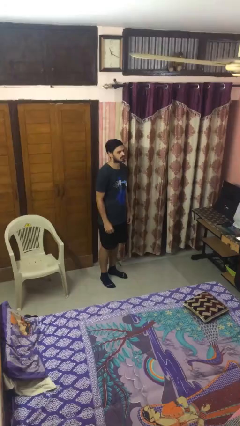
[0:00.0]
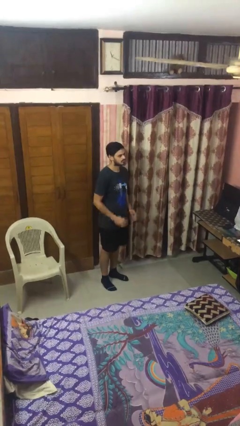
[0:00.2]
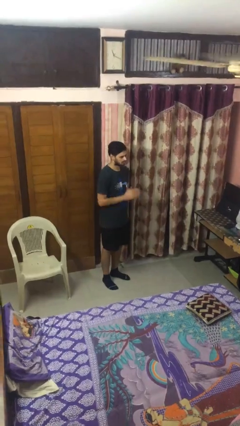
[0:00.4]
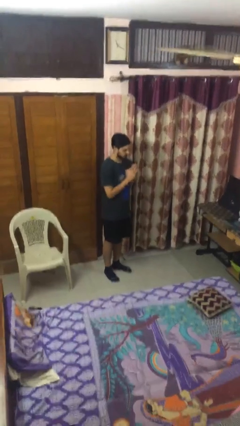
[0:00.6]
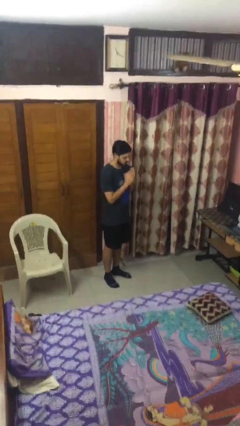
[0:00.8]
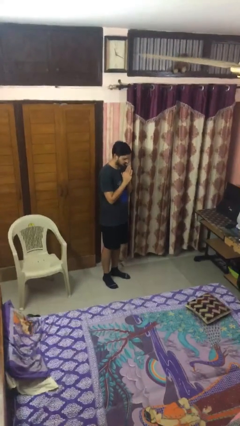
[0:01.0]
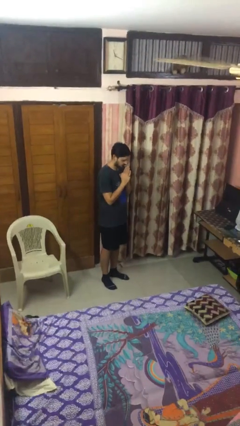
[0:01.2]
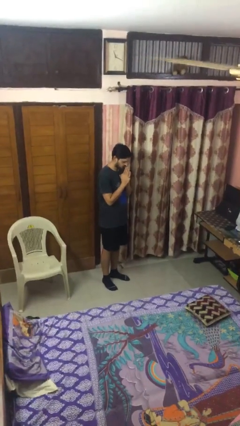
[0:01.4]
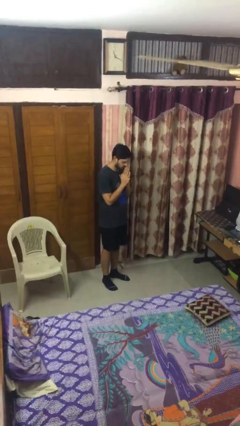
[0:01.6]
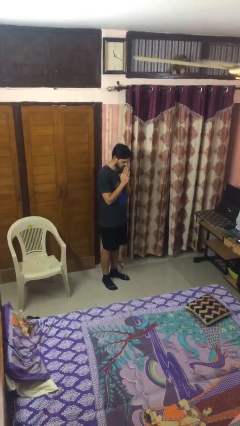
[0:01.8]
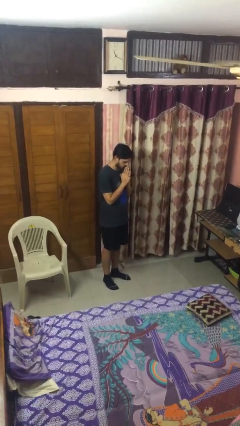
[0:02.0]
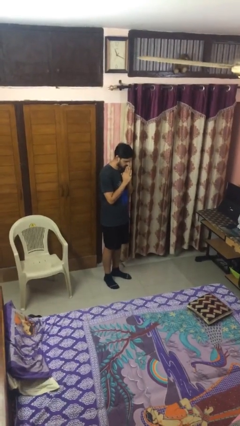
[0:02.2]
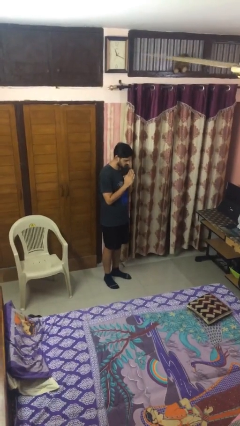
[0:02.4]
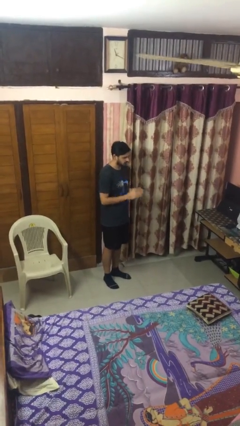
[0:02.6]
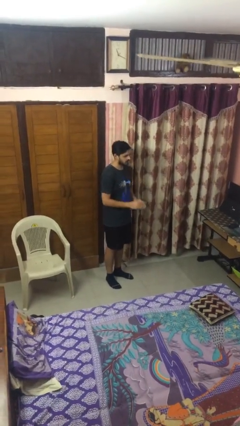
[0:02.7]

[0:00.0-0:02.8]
person prays

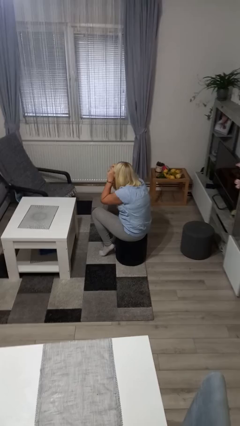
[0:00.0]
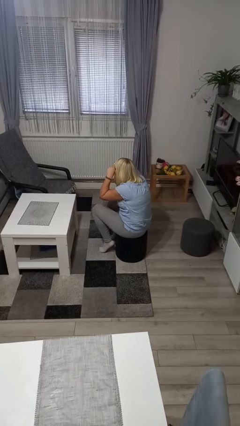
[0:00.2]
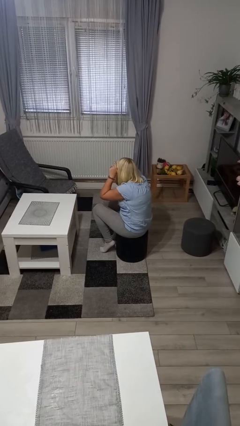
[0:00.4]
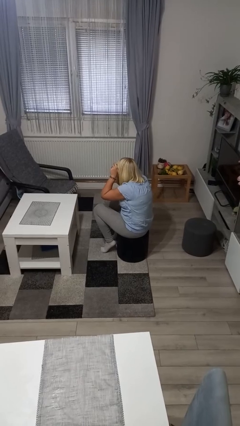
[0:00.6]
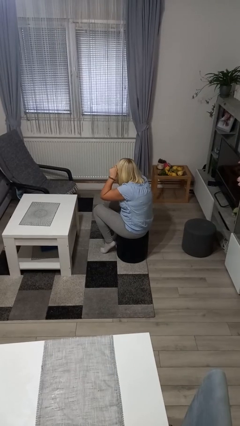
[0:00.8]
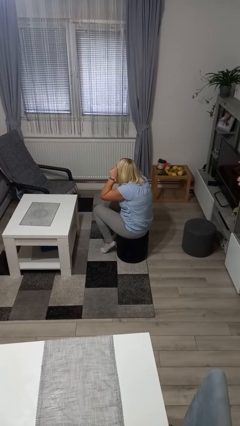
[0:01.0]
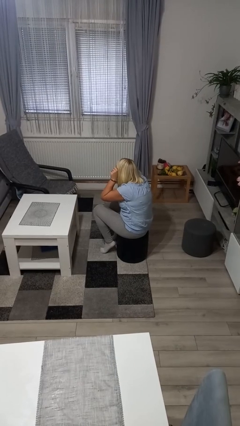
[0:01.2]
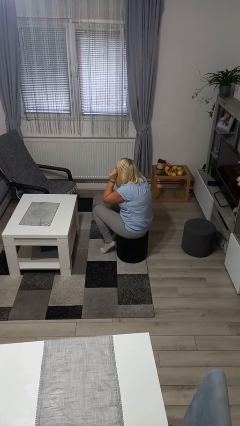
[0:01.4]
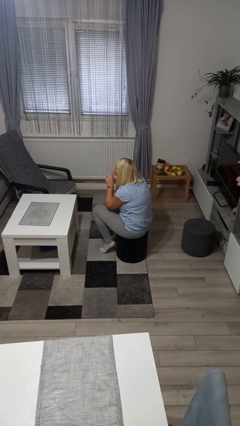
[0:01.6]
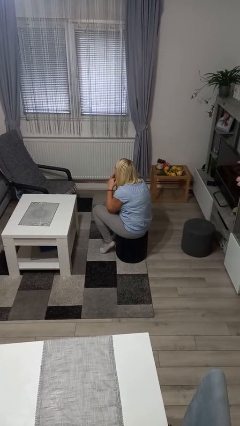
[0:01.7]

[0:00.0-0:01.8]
person rubs eyes

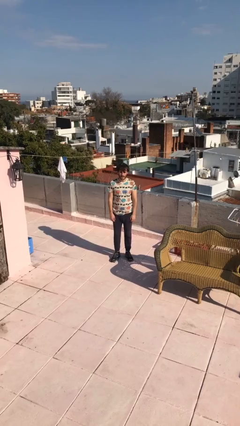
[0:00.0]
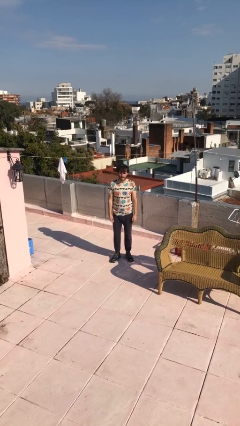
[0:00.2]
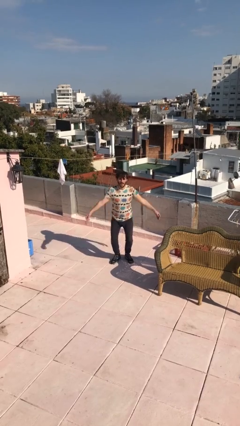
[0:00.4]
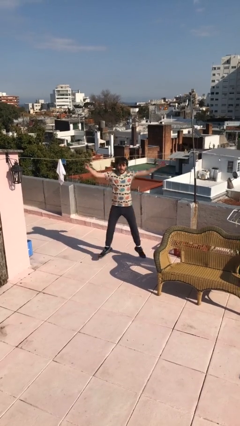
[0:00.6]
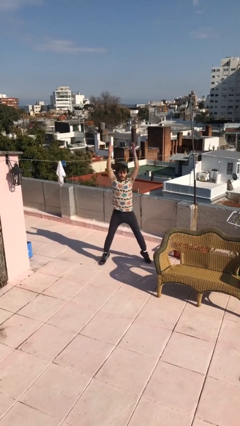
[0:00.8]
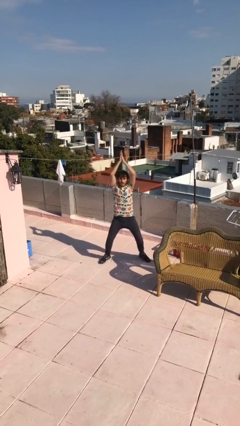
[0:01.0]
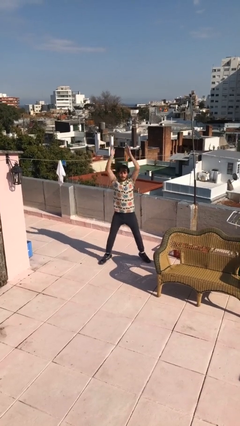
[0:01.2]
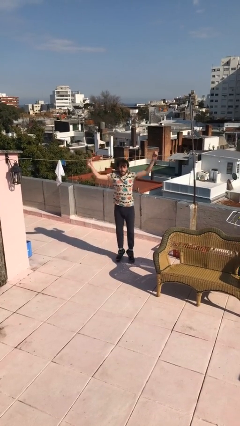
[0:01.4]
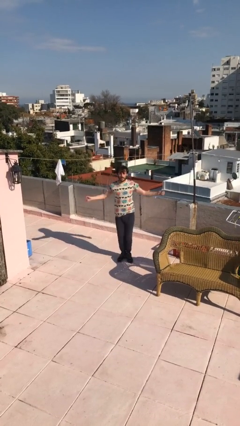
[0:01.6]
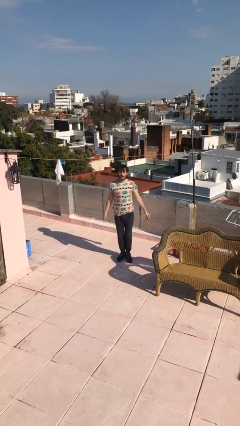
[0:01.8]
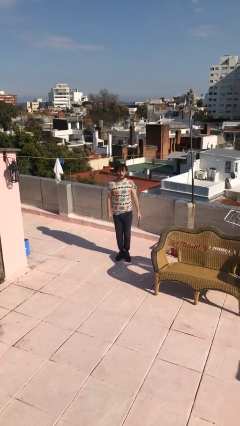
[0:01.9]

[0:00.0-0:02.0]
person exercises with jumping jacks

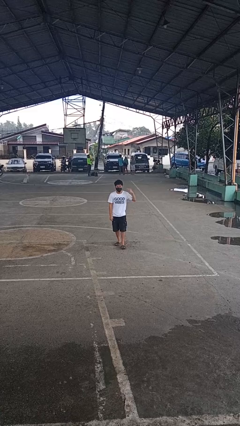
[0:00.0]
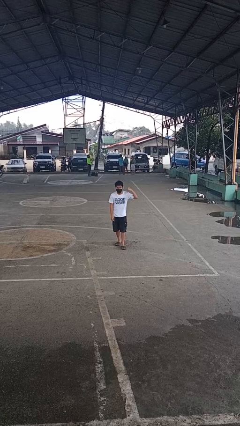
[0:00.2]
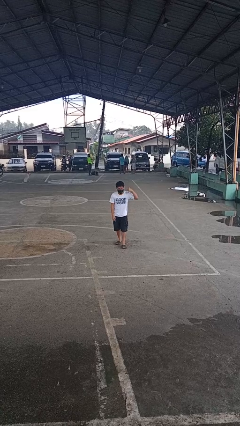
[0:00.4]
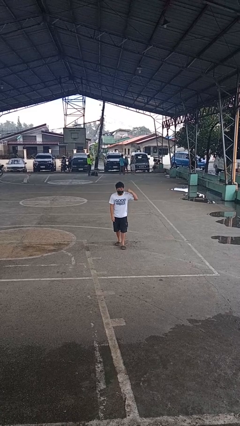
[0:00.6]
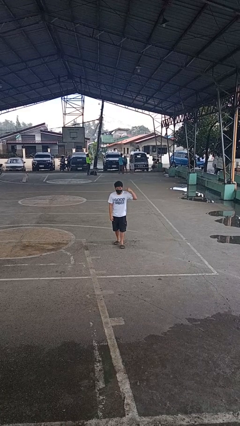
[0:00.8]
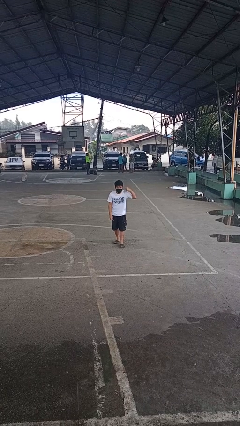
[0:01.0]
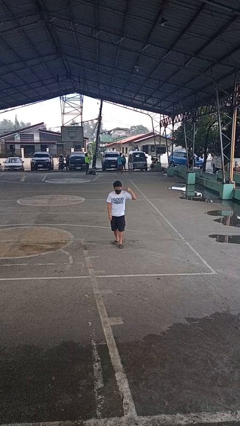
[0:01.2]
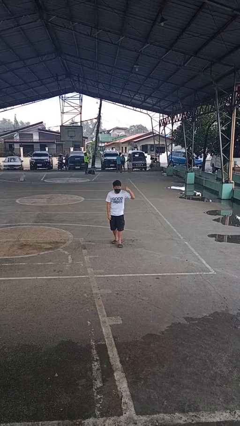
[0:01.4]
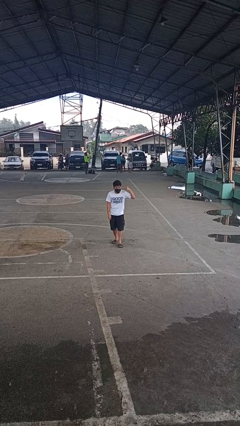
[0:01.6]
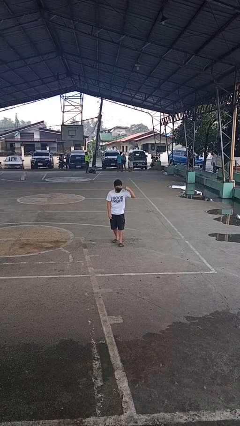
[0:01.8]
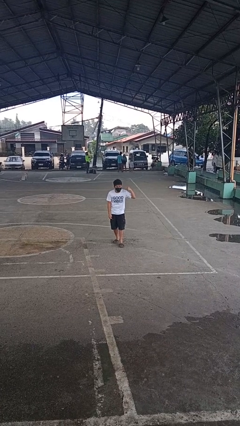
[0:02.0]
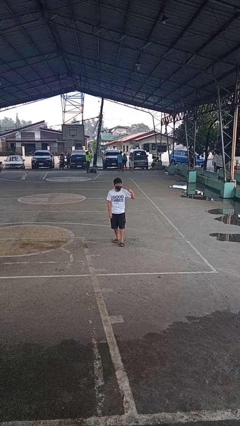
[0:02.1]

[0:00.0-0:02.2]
person gestures listen closely

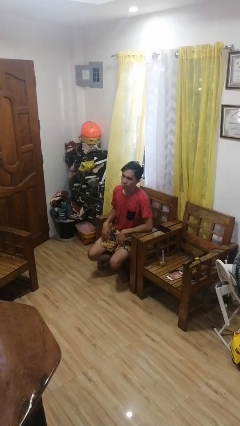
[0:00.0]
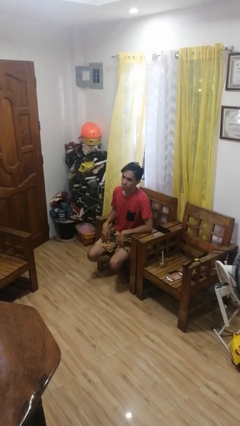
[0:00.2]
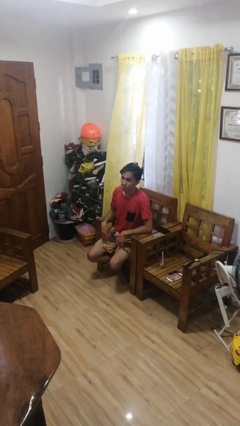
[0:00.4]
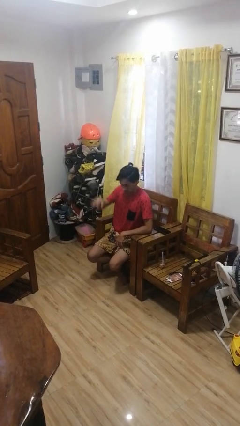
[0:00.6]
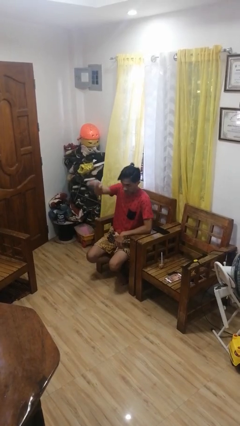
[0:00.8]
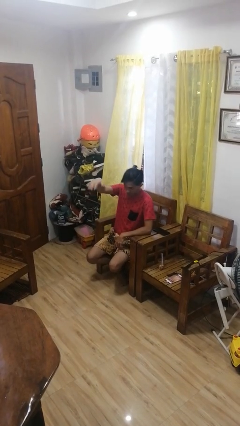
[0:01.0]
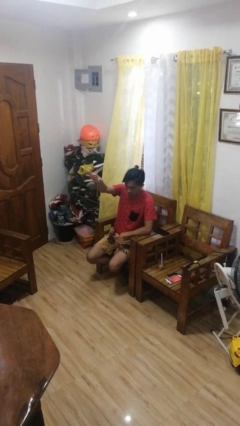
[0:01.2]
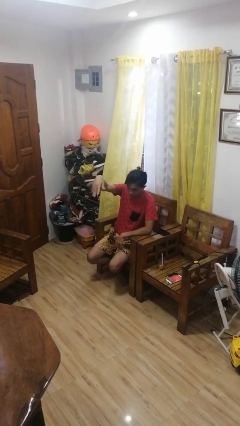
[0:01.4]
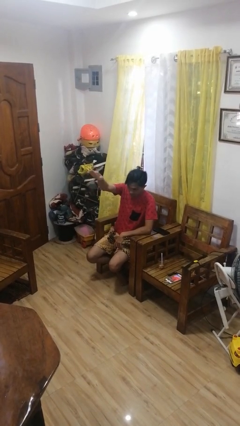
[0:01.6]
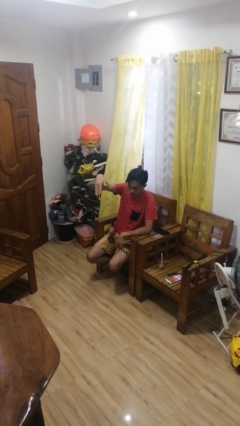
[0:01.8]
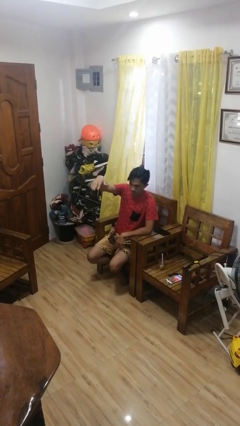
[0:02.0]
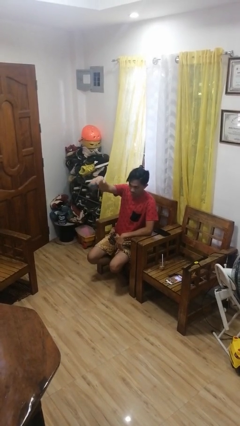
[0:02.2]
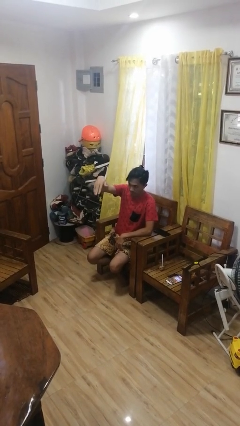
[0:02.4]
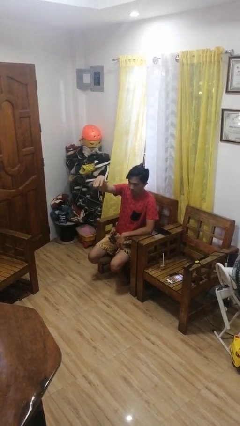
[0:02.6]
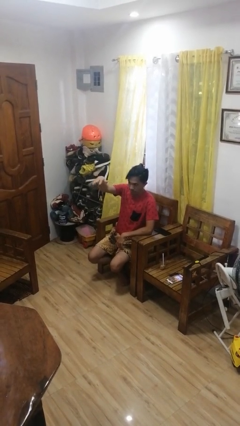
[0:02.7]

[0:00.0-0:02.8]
person gestures come here

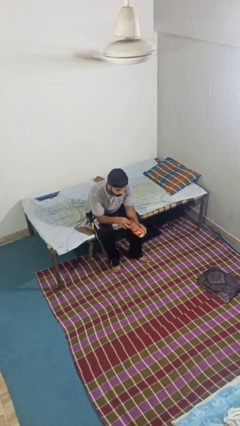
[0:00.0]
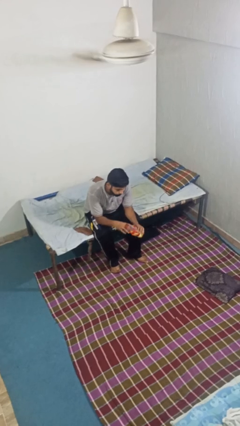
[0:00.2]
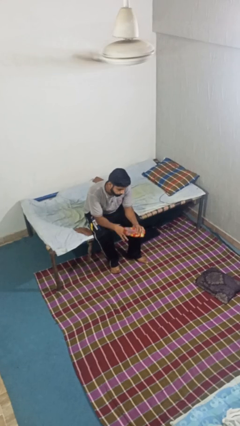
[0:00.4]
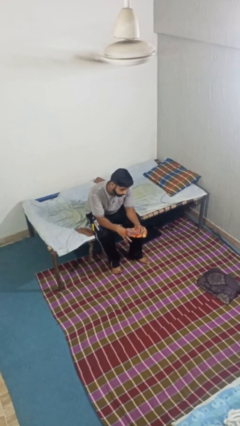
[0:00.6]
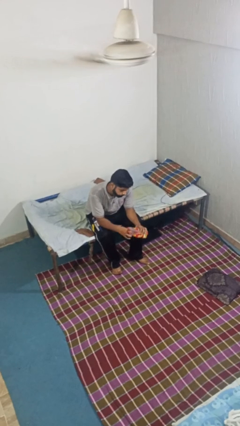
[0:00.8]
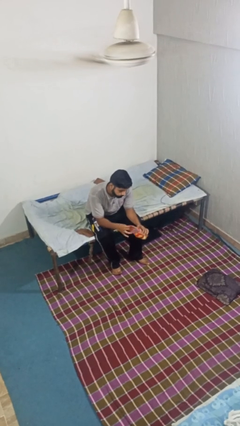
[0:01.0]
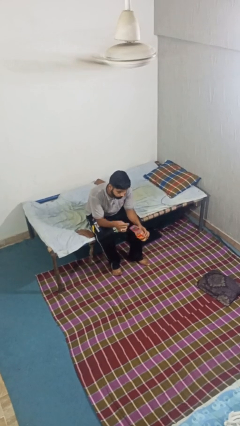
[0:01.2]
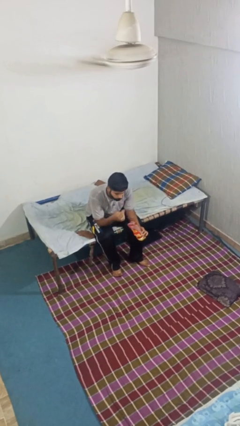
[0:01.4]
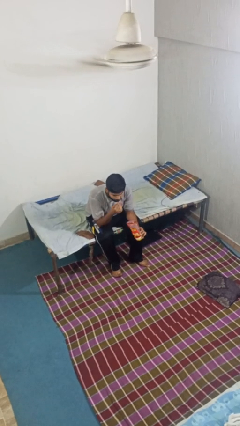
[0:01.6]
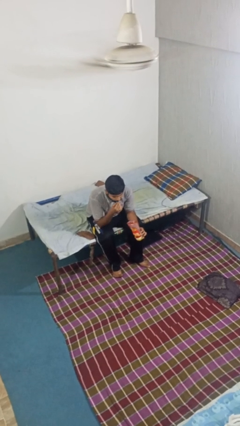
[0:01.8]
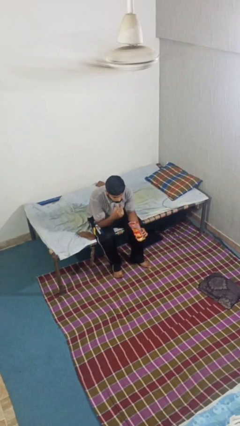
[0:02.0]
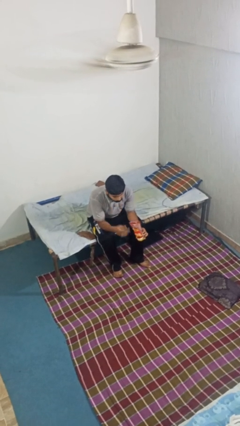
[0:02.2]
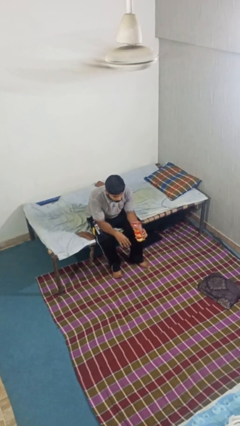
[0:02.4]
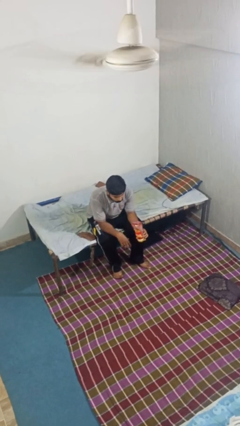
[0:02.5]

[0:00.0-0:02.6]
person eats snack from bag

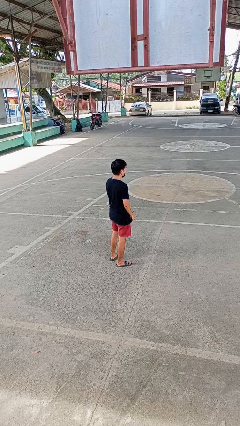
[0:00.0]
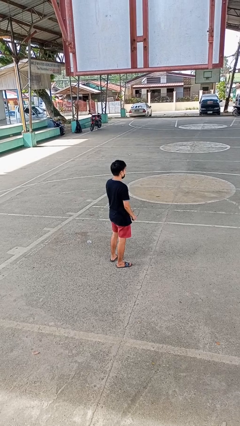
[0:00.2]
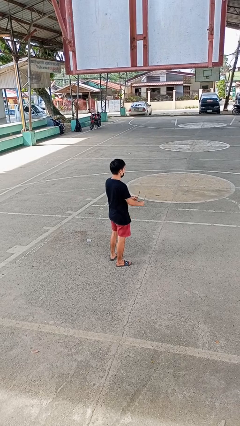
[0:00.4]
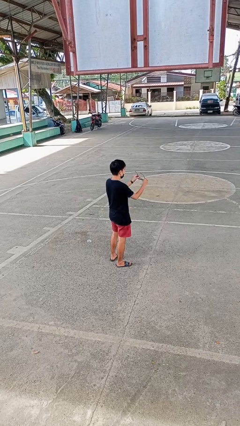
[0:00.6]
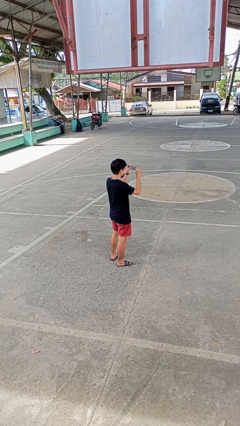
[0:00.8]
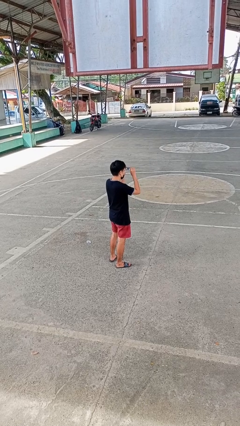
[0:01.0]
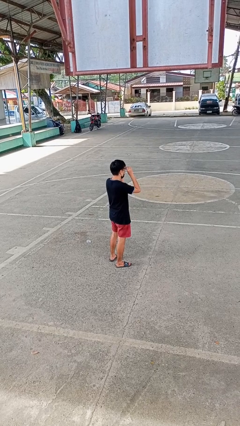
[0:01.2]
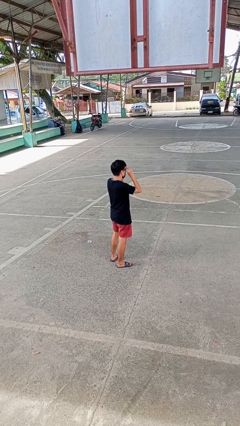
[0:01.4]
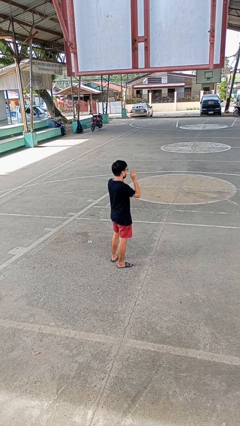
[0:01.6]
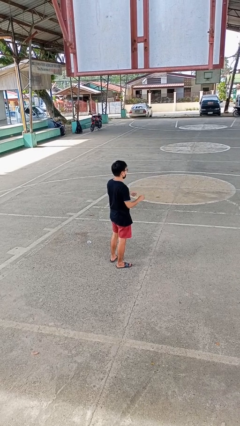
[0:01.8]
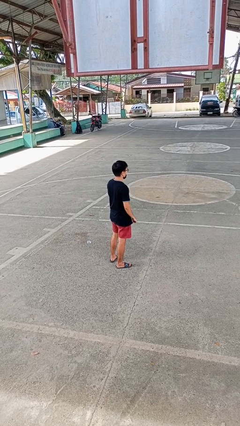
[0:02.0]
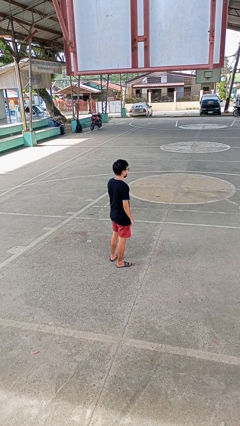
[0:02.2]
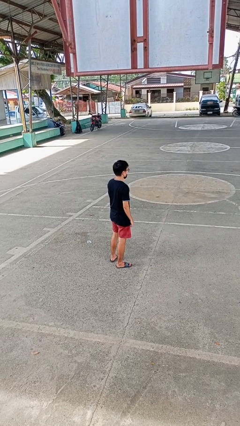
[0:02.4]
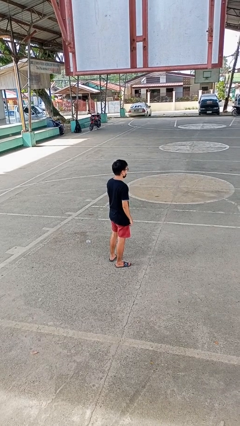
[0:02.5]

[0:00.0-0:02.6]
person puts on glasses
